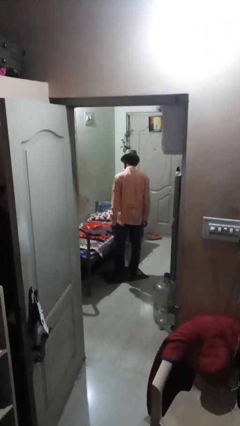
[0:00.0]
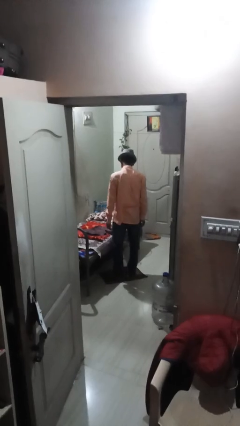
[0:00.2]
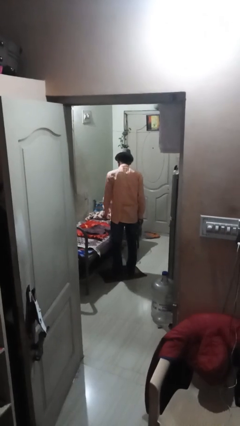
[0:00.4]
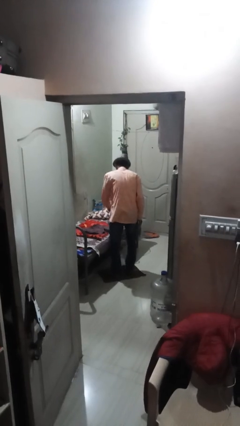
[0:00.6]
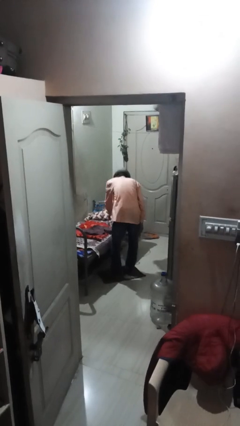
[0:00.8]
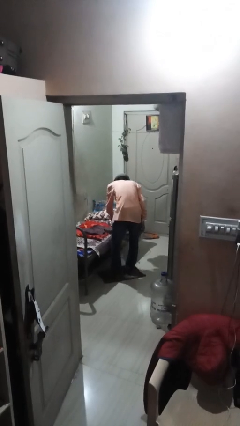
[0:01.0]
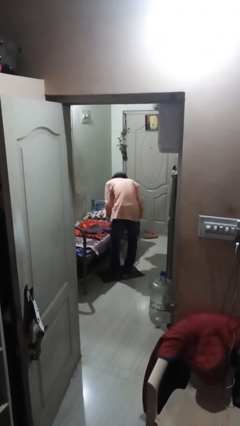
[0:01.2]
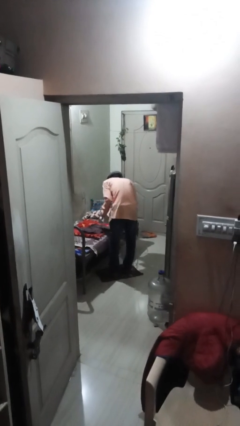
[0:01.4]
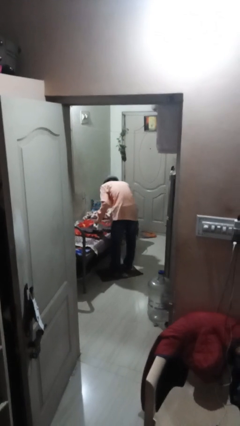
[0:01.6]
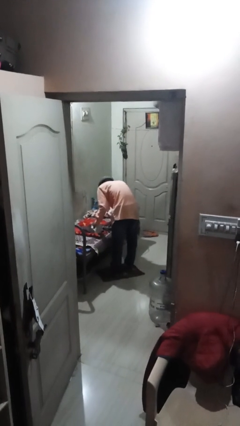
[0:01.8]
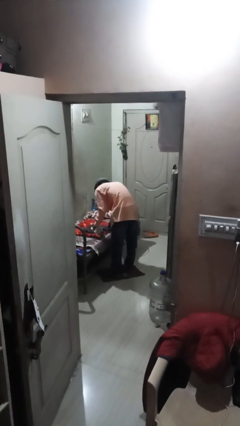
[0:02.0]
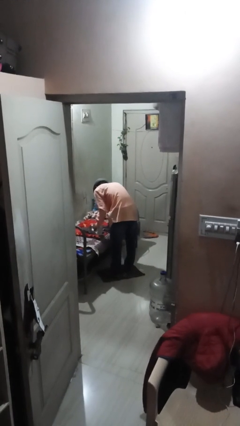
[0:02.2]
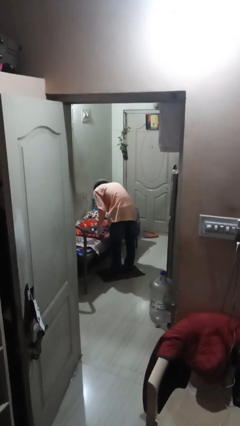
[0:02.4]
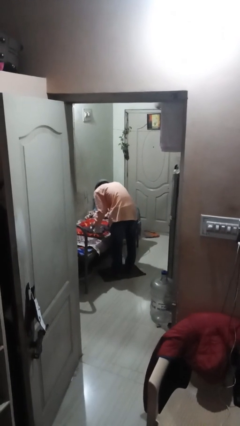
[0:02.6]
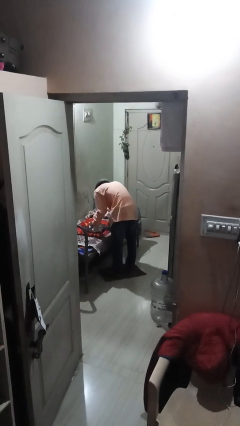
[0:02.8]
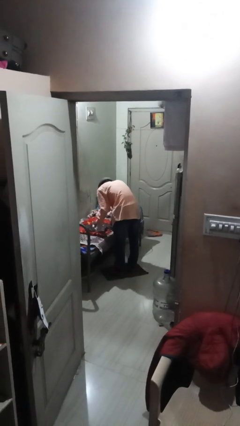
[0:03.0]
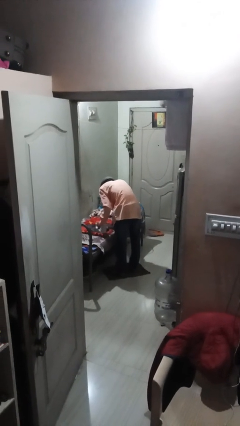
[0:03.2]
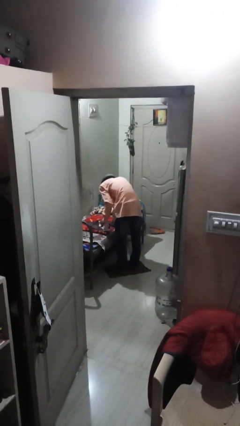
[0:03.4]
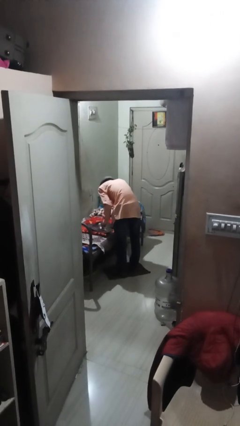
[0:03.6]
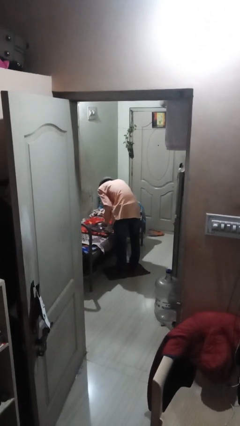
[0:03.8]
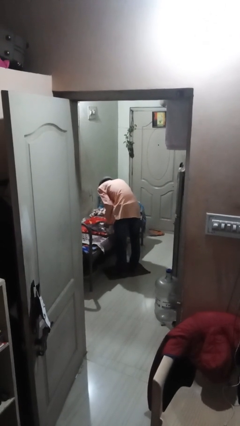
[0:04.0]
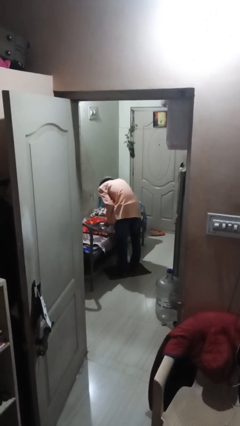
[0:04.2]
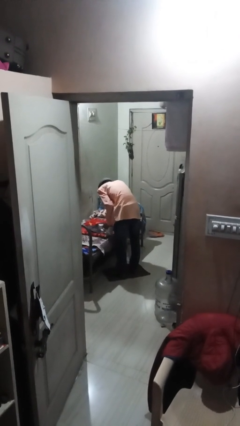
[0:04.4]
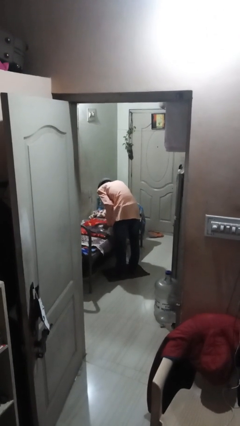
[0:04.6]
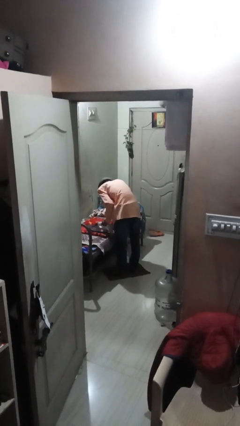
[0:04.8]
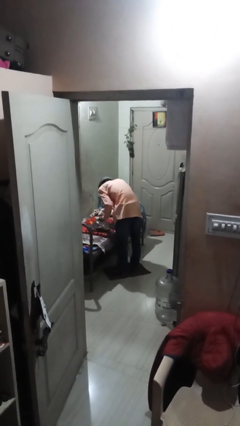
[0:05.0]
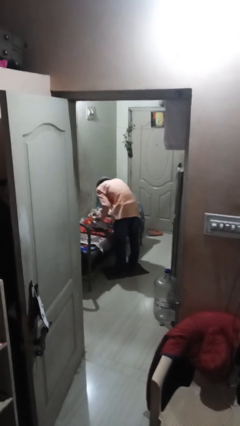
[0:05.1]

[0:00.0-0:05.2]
person irons clothes

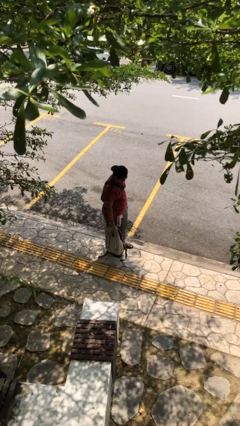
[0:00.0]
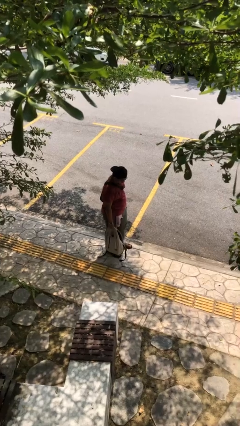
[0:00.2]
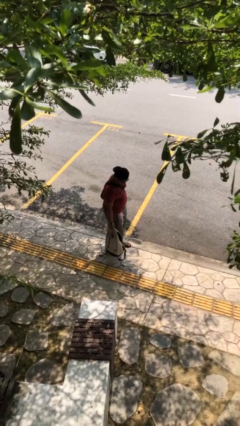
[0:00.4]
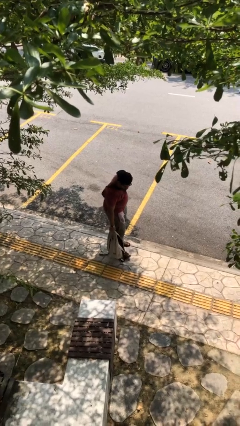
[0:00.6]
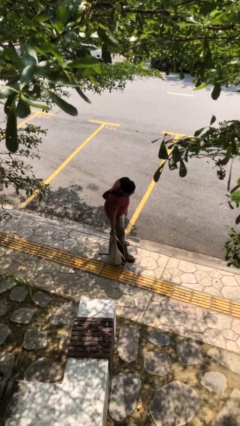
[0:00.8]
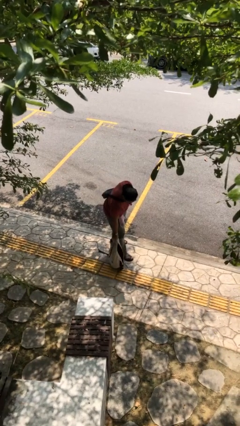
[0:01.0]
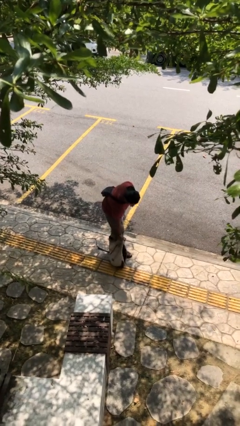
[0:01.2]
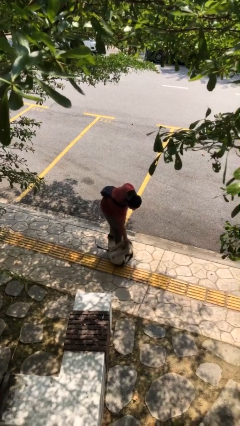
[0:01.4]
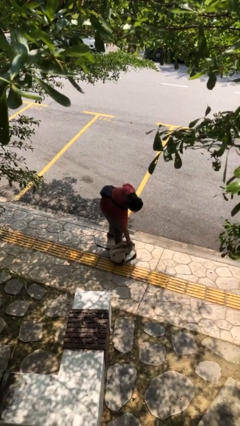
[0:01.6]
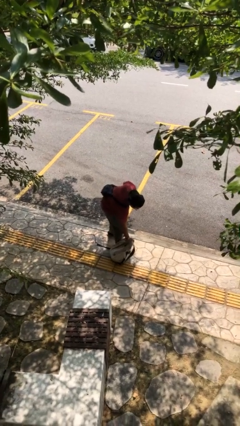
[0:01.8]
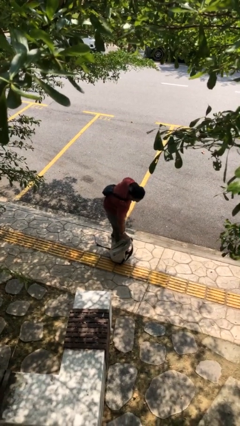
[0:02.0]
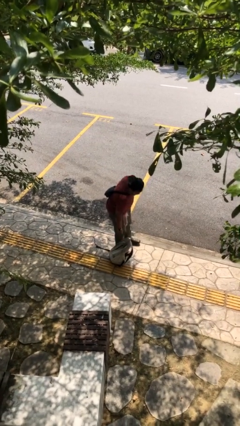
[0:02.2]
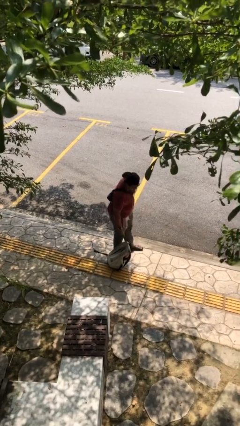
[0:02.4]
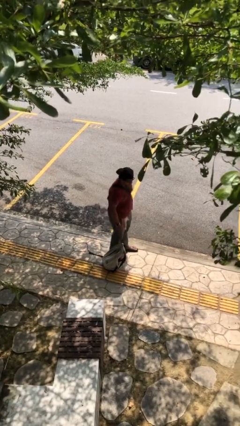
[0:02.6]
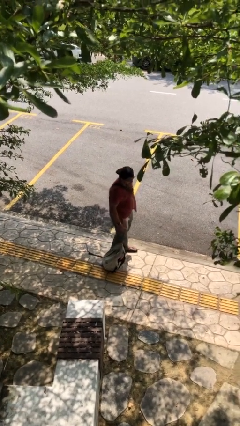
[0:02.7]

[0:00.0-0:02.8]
person puts down object on floor

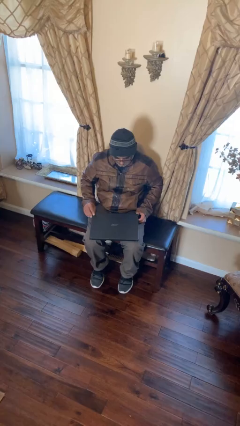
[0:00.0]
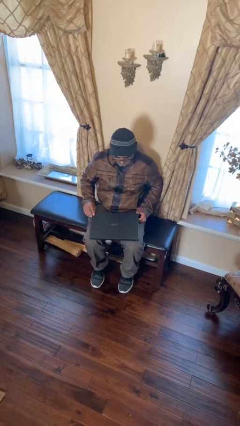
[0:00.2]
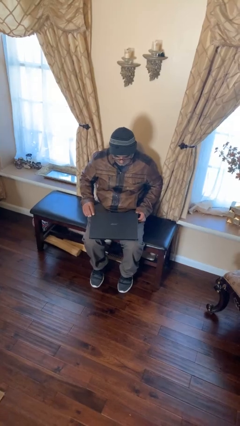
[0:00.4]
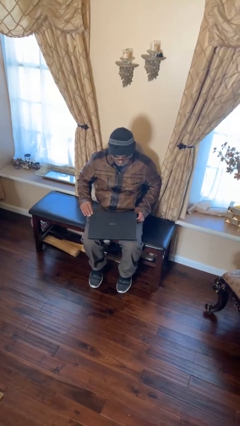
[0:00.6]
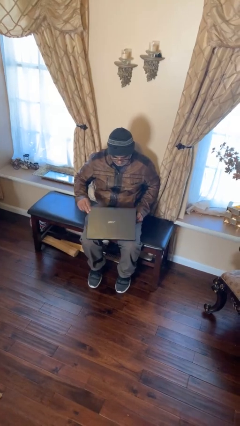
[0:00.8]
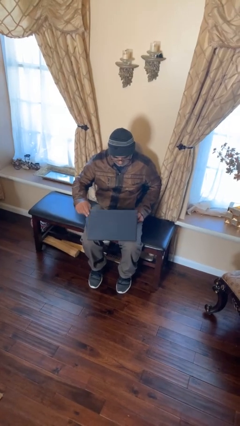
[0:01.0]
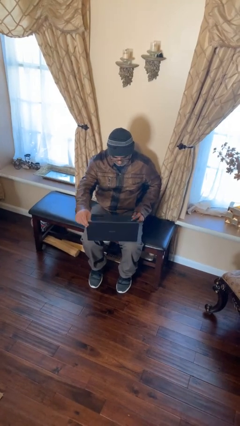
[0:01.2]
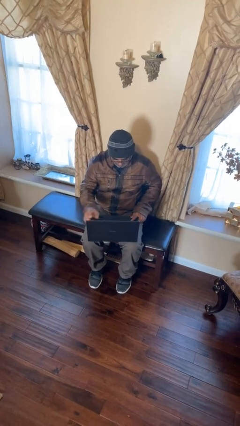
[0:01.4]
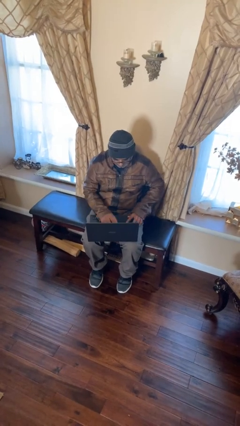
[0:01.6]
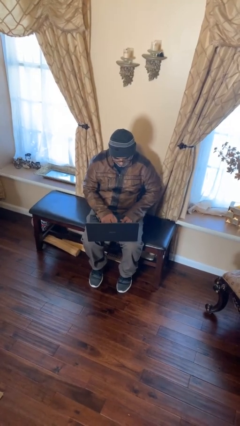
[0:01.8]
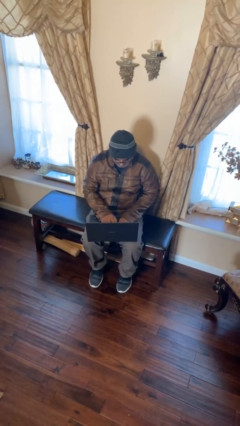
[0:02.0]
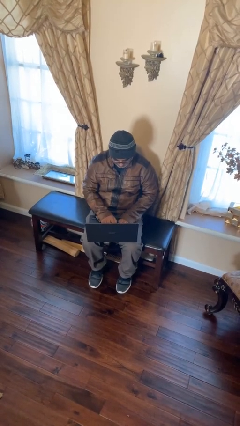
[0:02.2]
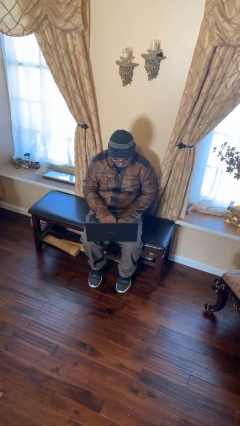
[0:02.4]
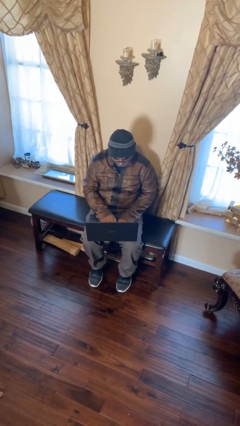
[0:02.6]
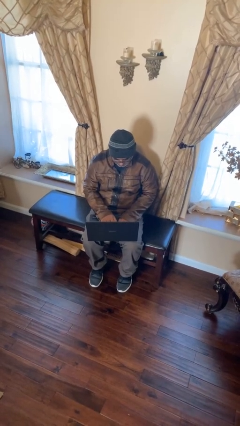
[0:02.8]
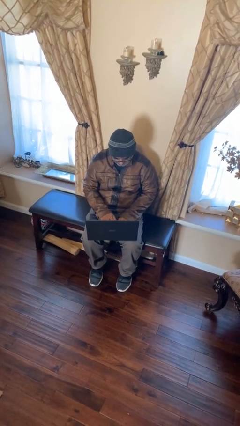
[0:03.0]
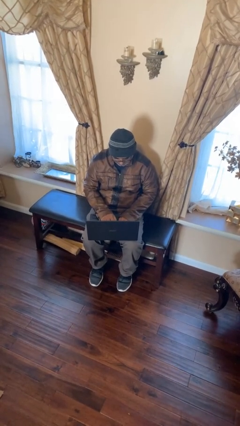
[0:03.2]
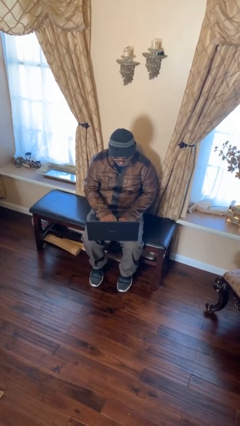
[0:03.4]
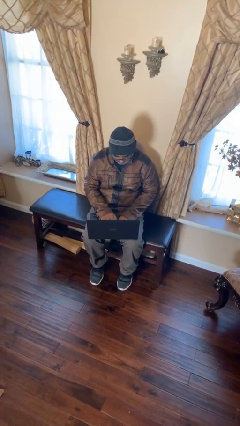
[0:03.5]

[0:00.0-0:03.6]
person interacts with laptop

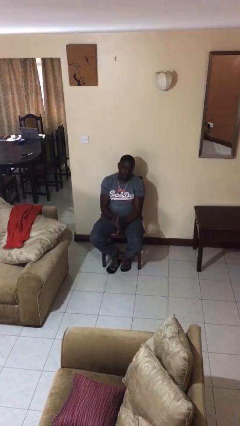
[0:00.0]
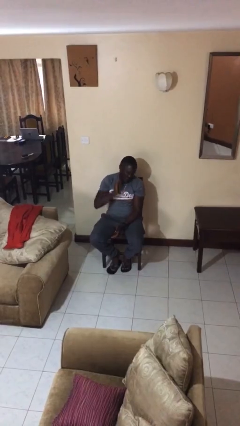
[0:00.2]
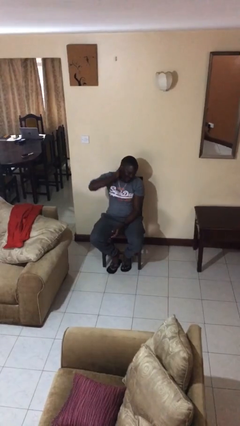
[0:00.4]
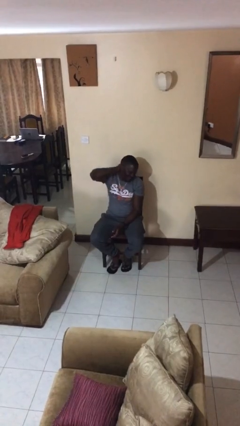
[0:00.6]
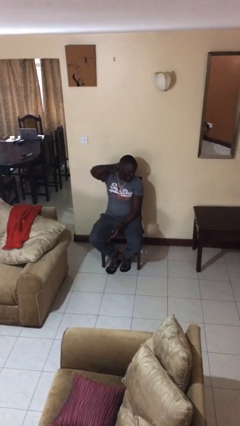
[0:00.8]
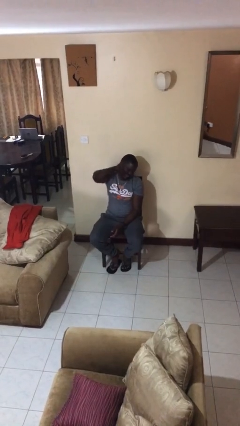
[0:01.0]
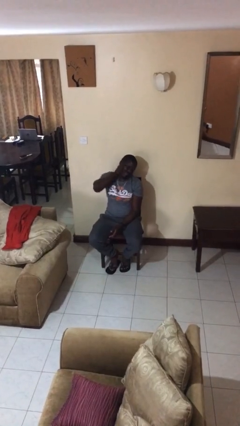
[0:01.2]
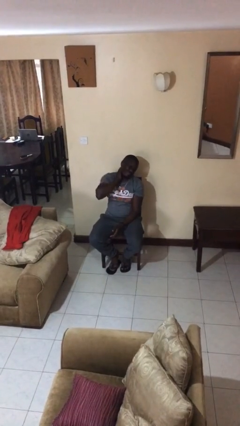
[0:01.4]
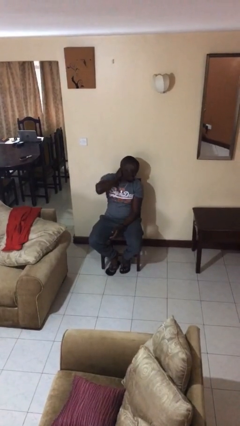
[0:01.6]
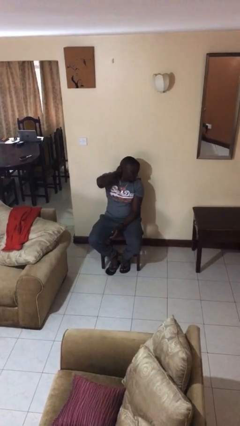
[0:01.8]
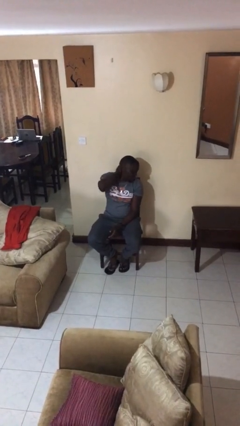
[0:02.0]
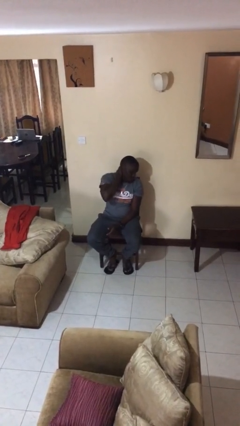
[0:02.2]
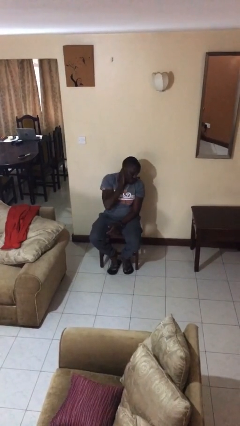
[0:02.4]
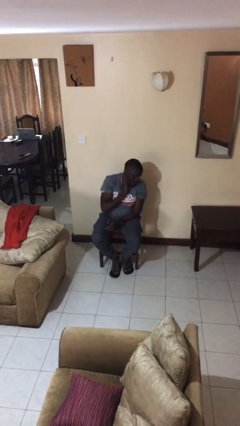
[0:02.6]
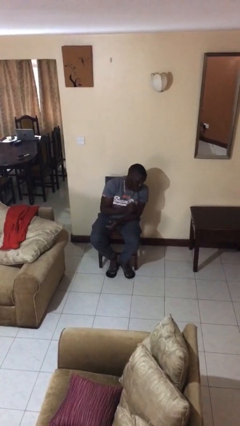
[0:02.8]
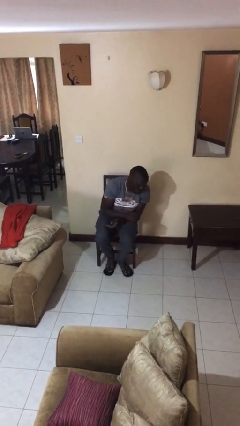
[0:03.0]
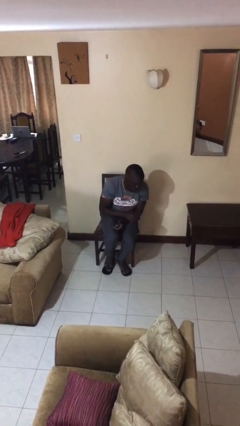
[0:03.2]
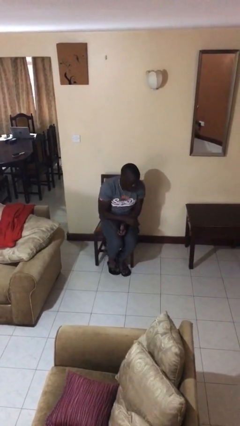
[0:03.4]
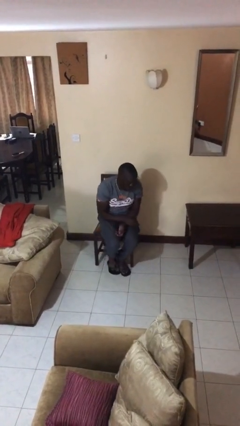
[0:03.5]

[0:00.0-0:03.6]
person rubs neck

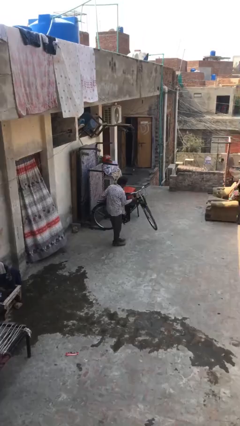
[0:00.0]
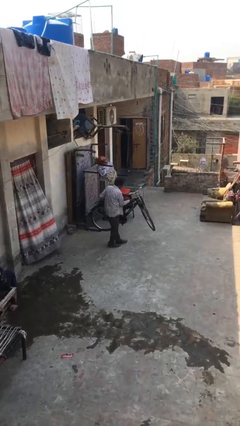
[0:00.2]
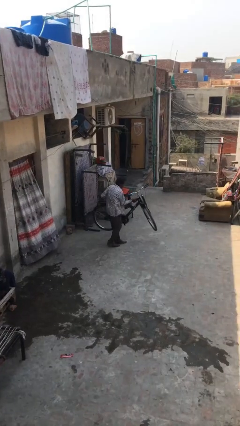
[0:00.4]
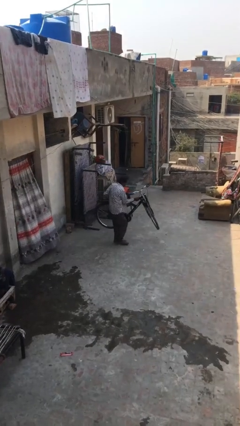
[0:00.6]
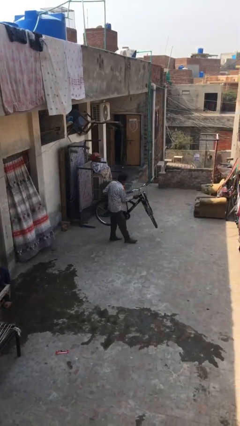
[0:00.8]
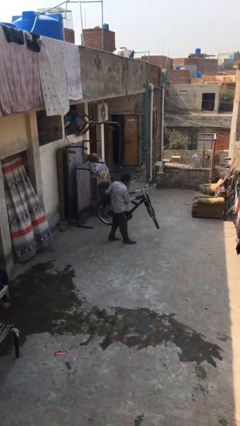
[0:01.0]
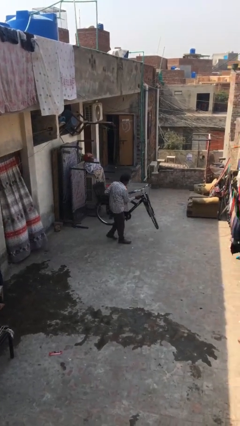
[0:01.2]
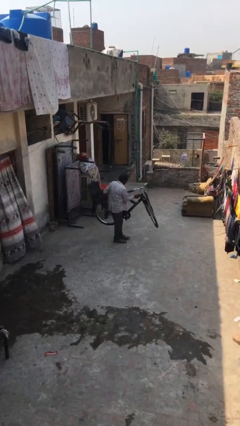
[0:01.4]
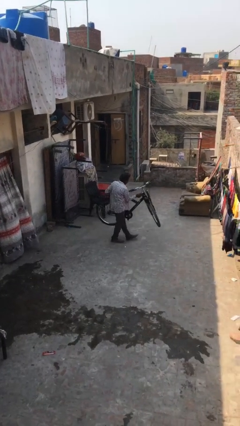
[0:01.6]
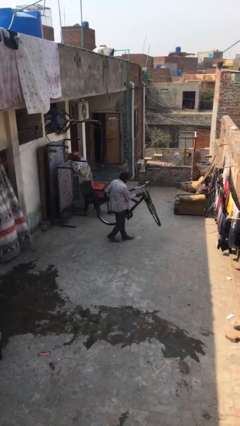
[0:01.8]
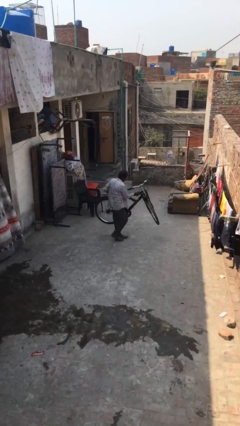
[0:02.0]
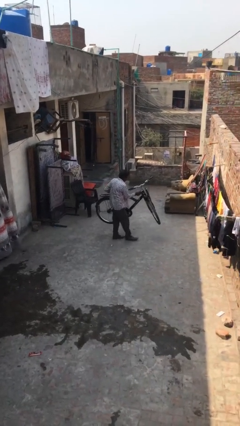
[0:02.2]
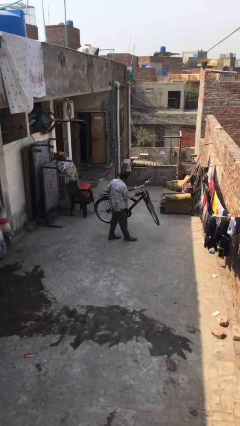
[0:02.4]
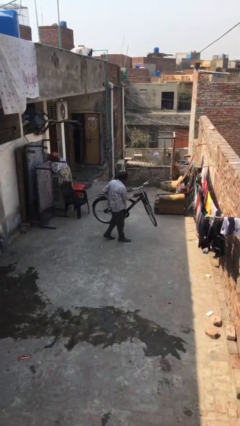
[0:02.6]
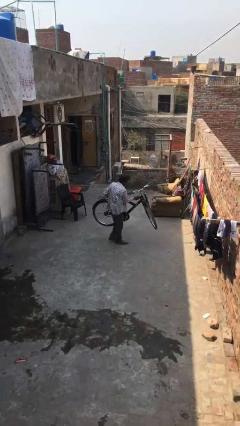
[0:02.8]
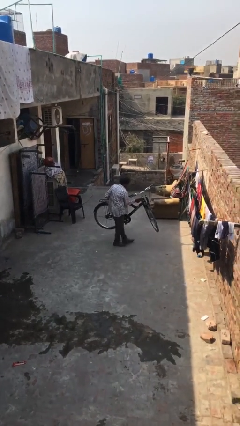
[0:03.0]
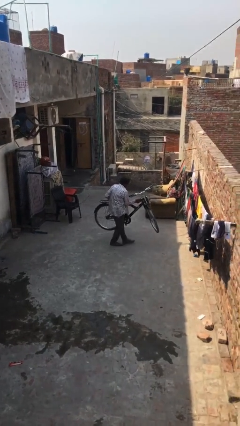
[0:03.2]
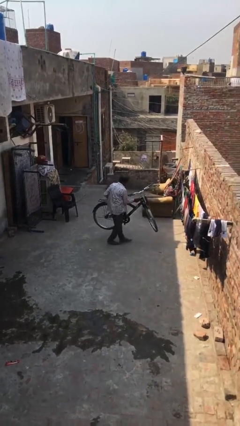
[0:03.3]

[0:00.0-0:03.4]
person carries heavy object
